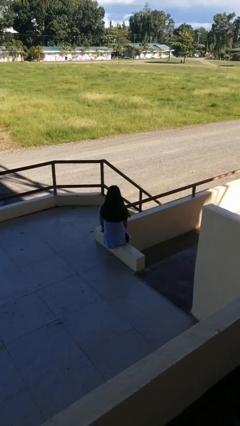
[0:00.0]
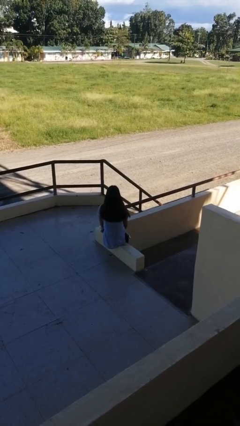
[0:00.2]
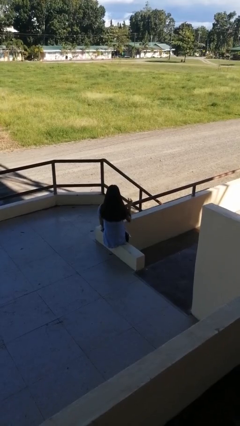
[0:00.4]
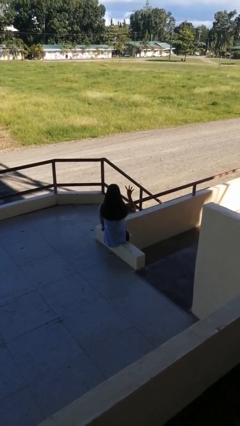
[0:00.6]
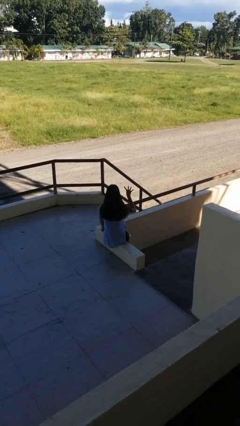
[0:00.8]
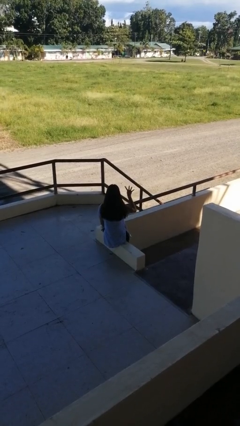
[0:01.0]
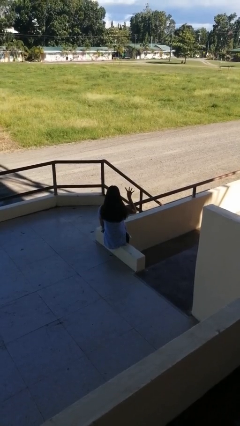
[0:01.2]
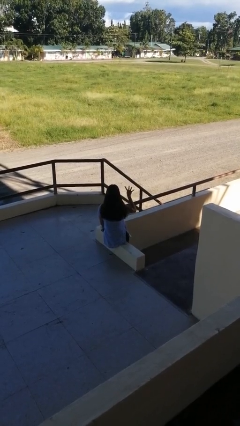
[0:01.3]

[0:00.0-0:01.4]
person gestures number four

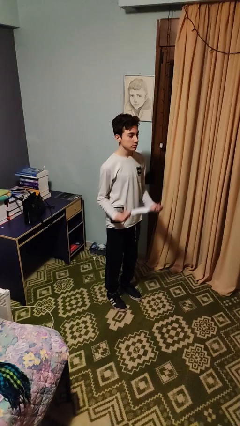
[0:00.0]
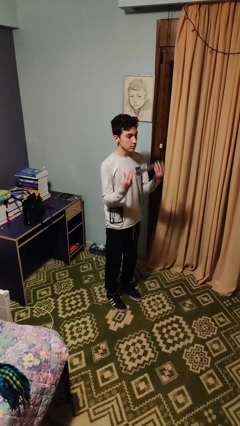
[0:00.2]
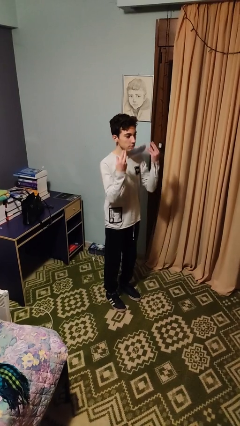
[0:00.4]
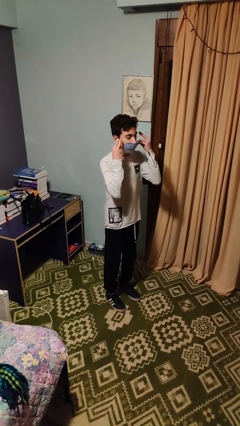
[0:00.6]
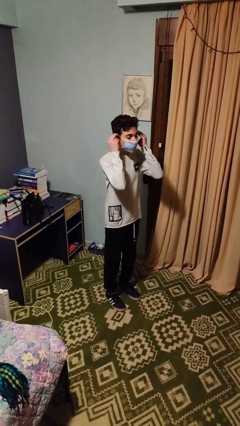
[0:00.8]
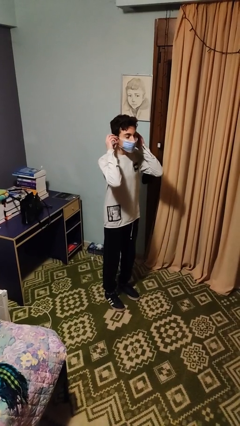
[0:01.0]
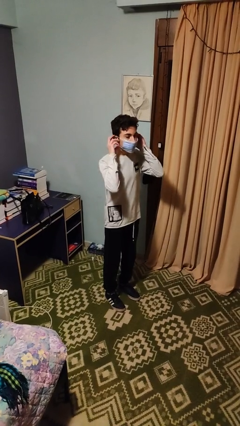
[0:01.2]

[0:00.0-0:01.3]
person puts on facemask

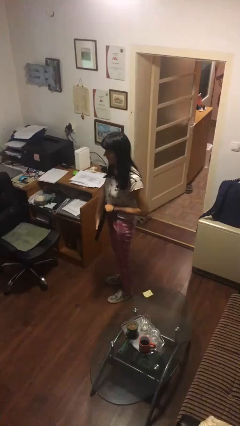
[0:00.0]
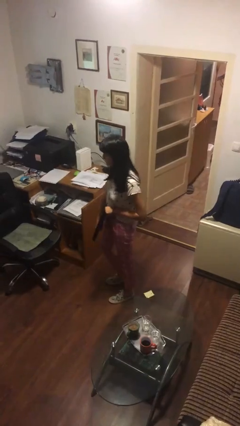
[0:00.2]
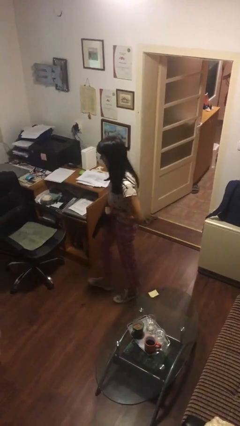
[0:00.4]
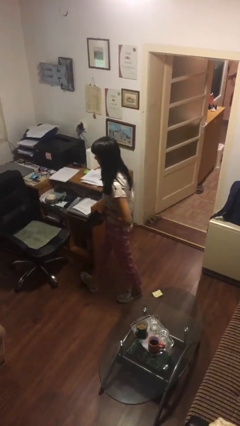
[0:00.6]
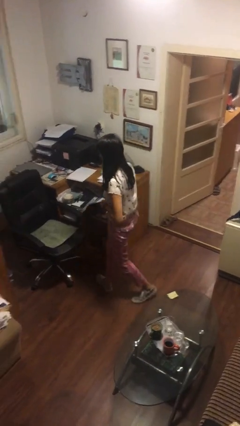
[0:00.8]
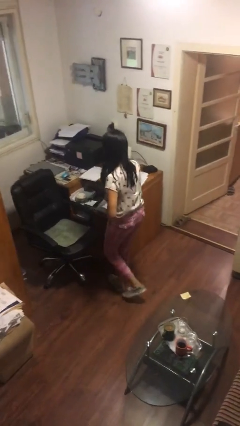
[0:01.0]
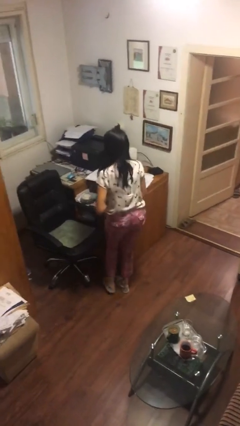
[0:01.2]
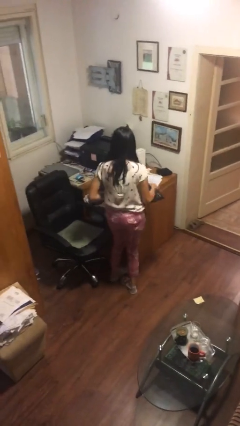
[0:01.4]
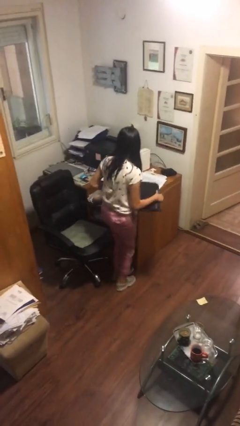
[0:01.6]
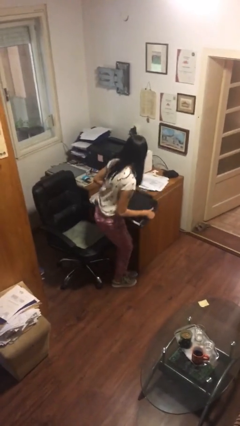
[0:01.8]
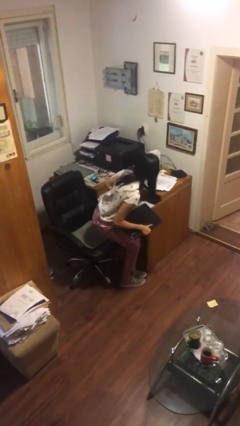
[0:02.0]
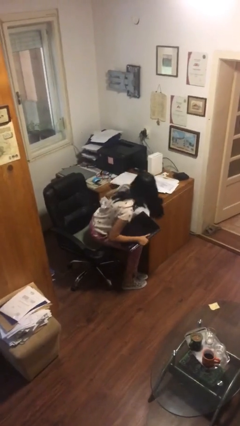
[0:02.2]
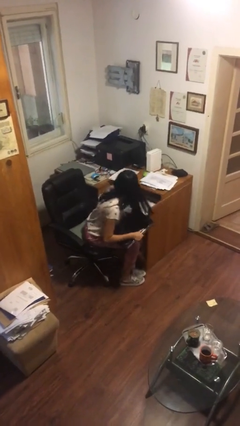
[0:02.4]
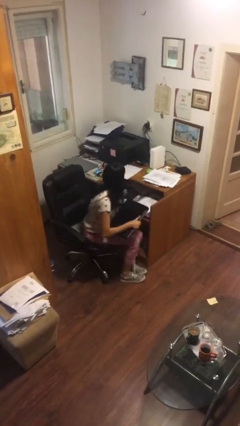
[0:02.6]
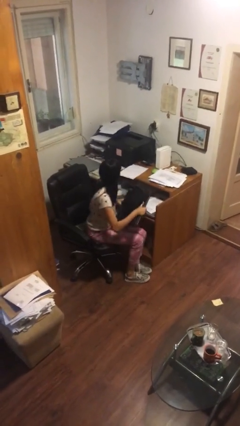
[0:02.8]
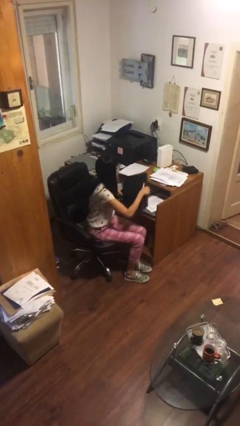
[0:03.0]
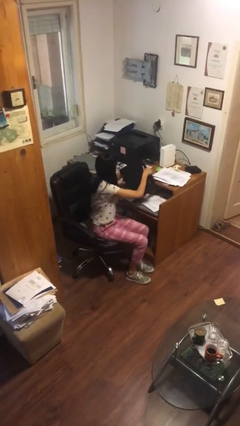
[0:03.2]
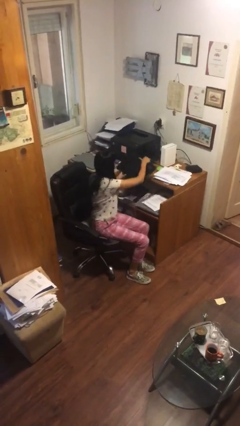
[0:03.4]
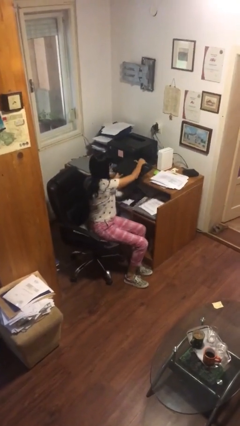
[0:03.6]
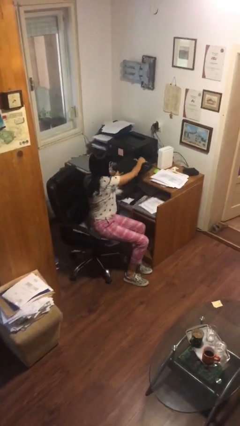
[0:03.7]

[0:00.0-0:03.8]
person sits down

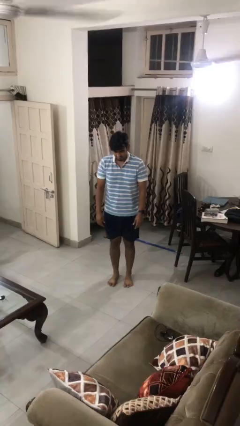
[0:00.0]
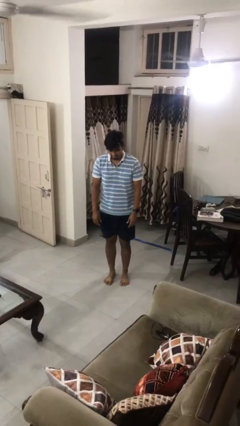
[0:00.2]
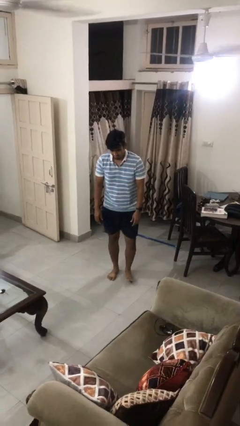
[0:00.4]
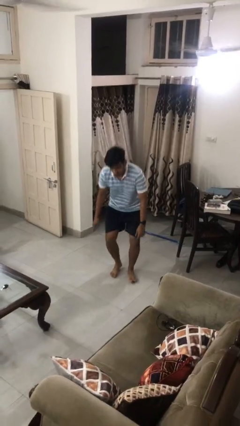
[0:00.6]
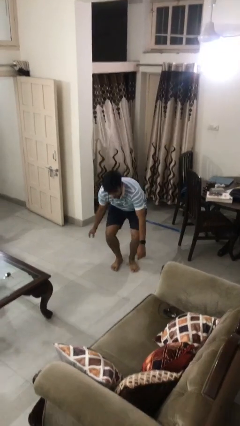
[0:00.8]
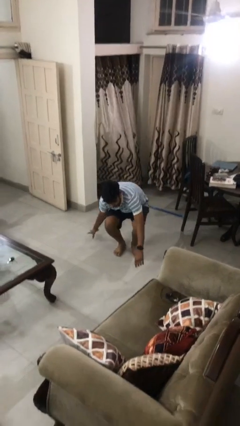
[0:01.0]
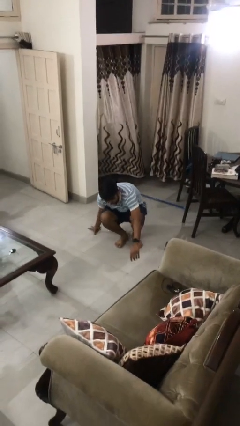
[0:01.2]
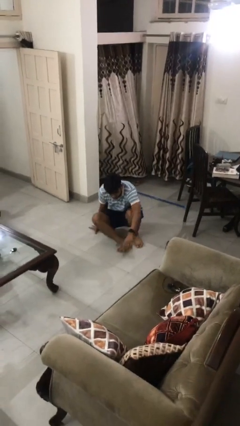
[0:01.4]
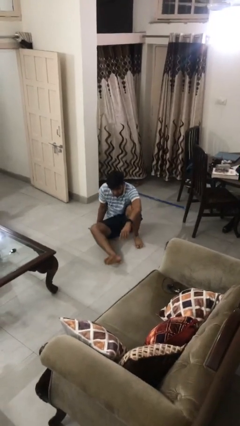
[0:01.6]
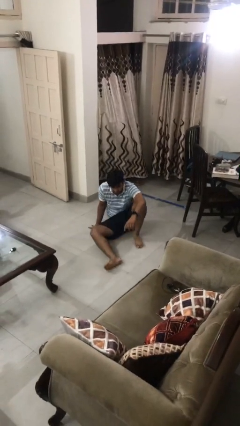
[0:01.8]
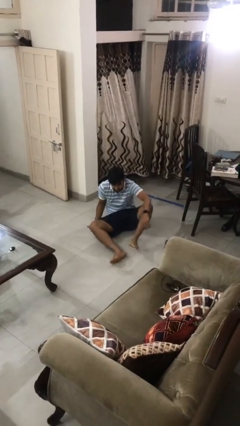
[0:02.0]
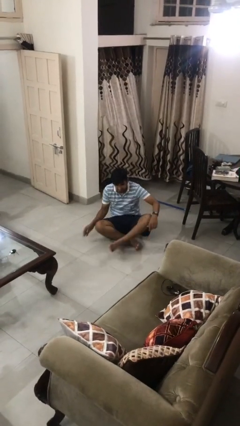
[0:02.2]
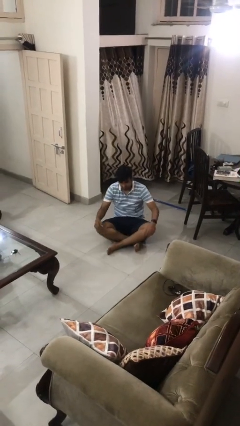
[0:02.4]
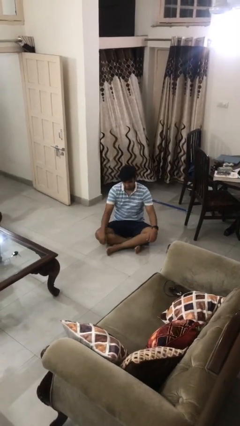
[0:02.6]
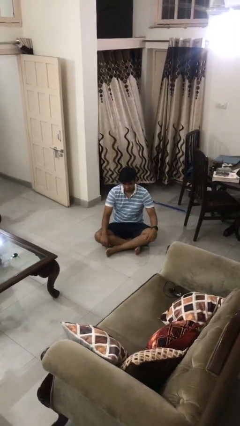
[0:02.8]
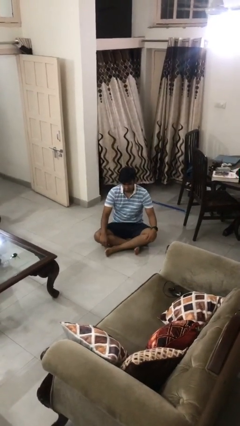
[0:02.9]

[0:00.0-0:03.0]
person sits crisscross

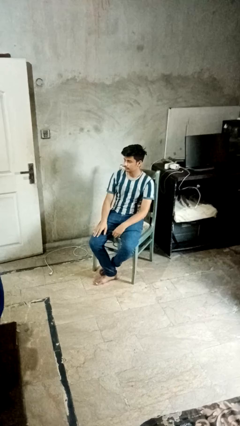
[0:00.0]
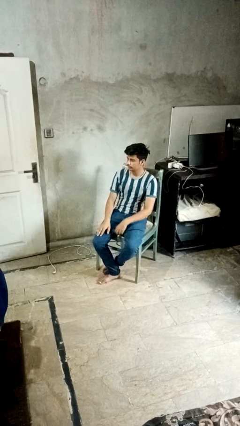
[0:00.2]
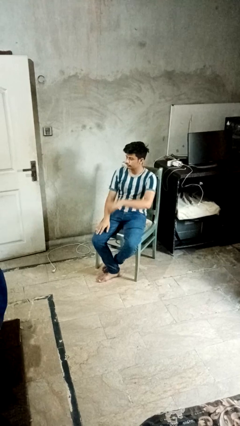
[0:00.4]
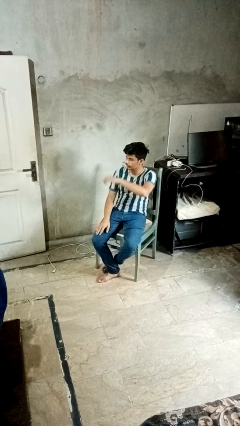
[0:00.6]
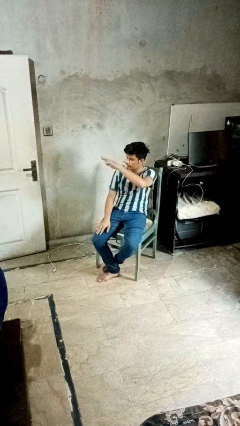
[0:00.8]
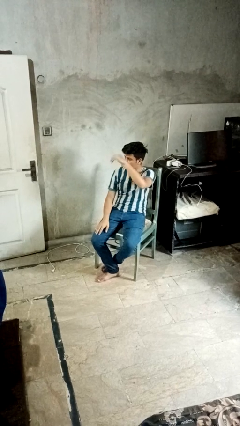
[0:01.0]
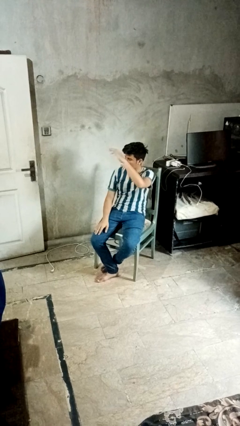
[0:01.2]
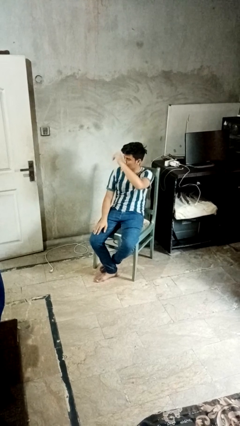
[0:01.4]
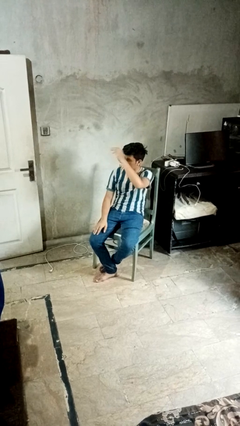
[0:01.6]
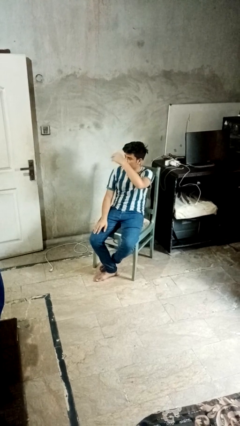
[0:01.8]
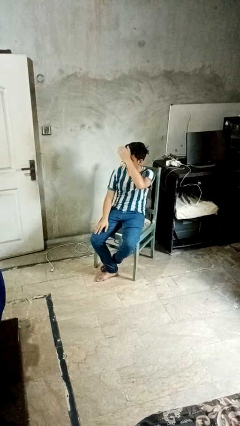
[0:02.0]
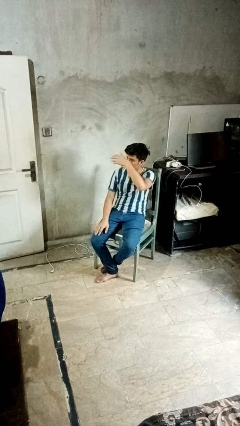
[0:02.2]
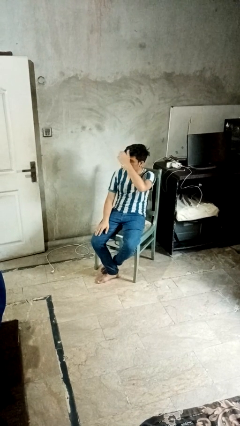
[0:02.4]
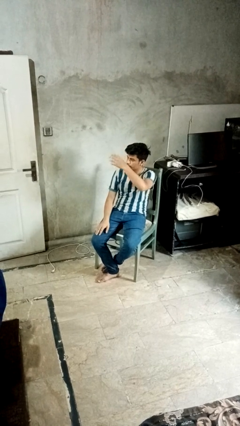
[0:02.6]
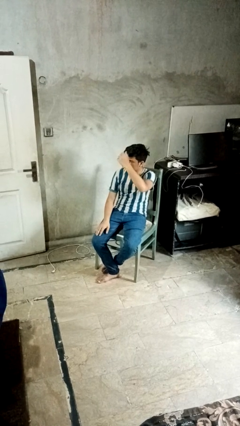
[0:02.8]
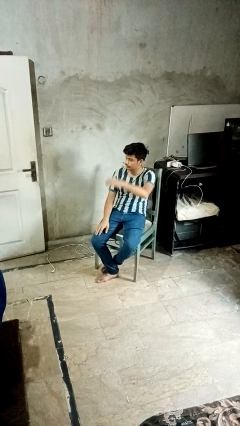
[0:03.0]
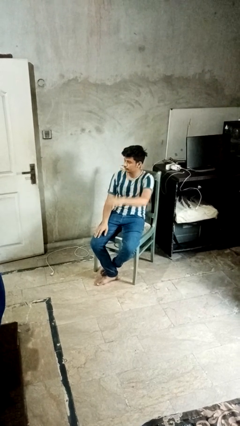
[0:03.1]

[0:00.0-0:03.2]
person gestures come here

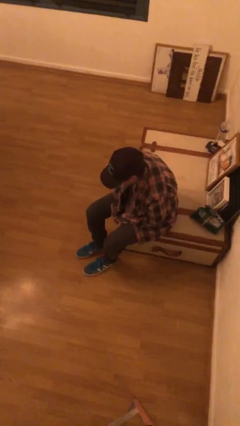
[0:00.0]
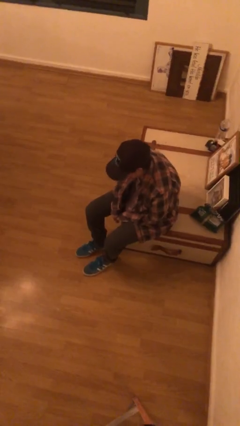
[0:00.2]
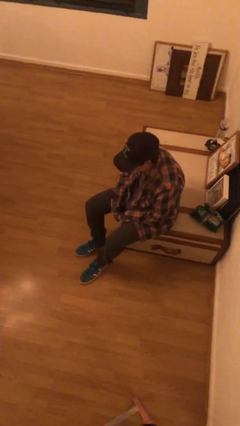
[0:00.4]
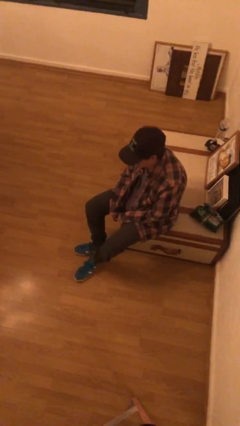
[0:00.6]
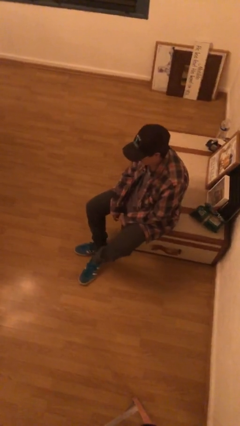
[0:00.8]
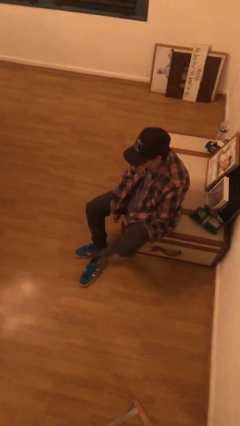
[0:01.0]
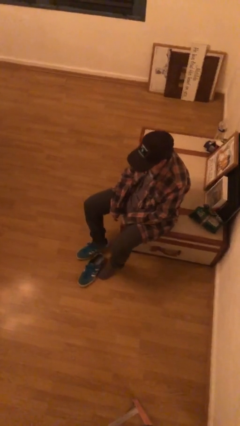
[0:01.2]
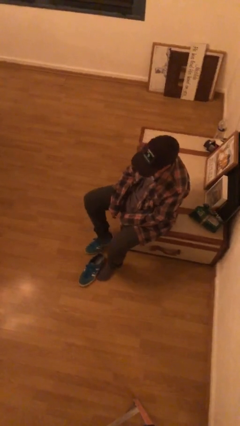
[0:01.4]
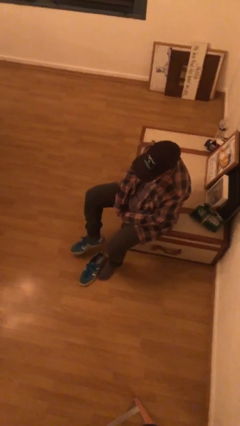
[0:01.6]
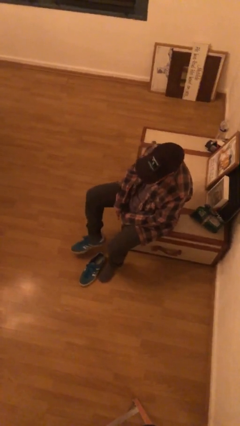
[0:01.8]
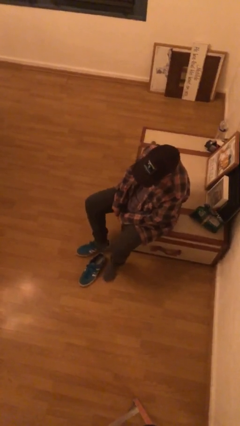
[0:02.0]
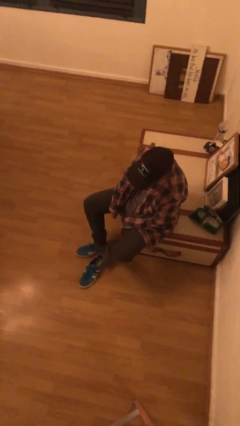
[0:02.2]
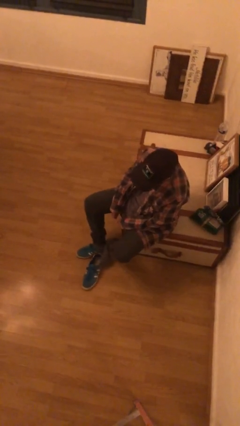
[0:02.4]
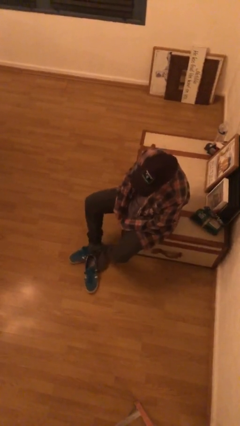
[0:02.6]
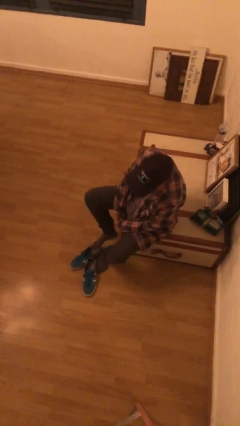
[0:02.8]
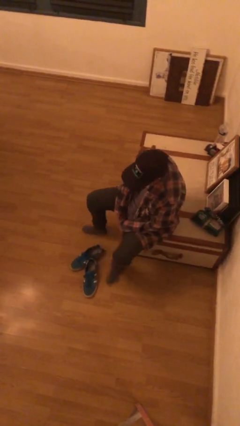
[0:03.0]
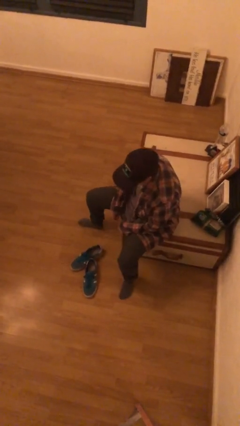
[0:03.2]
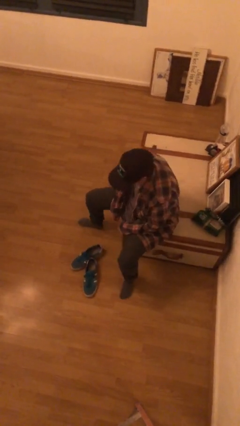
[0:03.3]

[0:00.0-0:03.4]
person takes off shoes

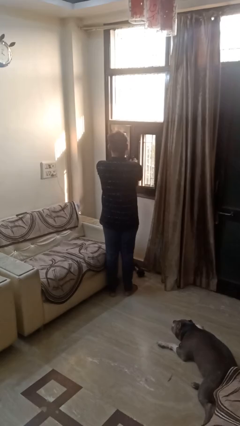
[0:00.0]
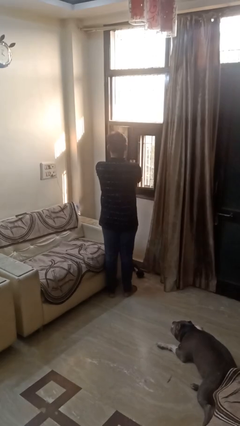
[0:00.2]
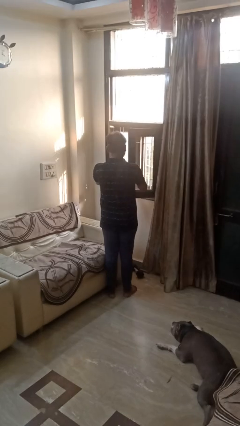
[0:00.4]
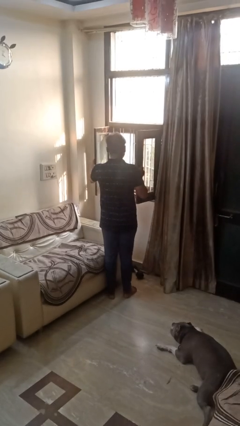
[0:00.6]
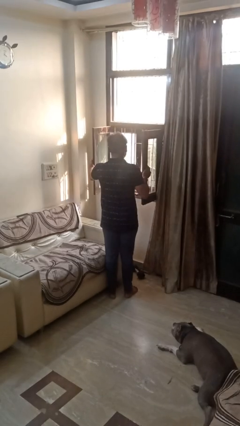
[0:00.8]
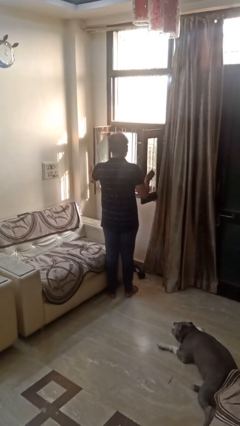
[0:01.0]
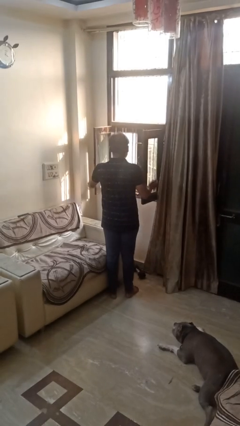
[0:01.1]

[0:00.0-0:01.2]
person opens home window

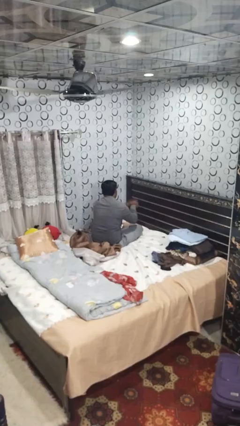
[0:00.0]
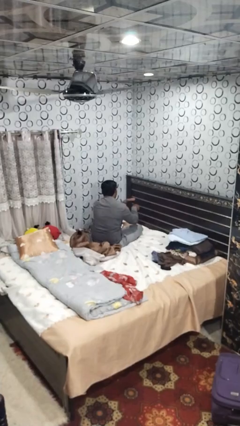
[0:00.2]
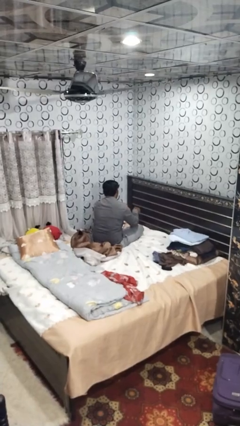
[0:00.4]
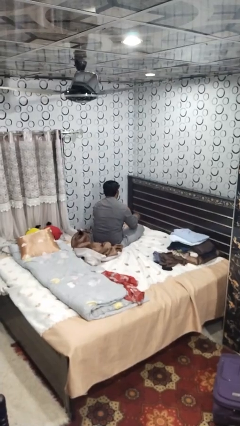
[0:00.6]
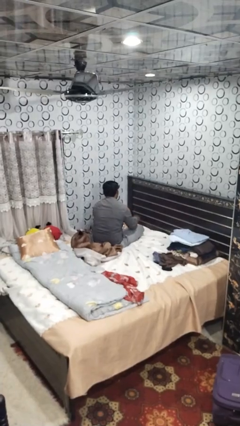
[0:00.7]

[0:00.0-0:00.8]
person swats bug
